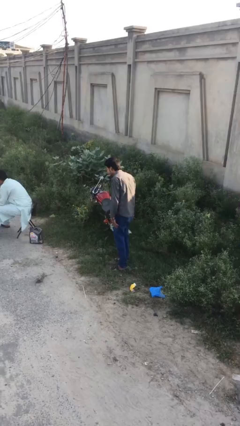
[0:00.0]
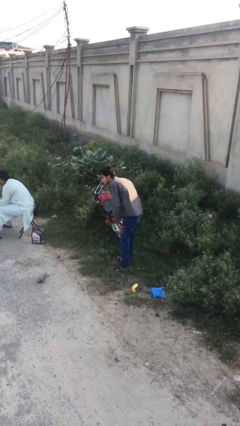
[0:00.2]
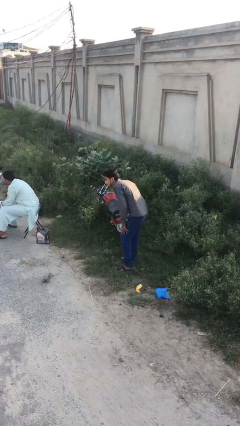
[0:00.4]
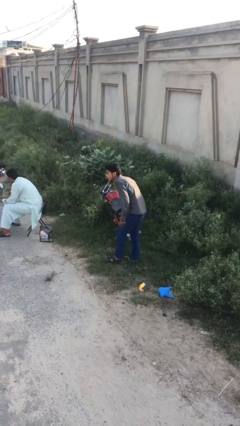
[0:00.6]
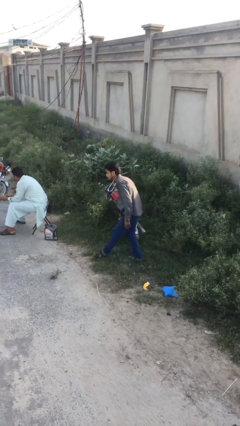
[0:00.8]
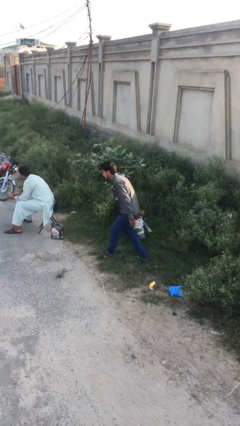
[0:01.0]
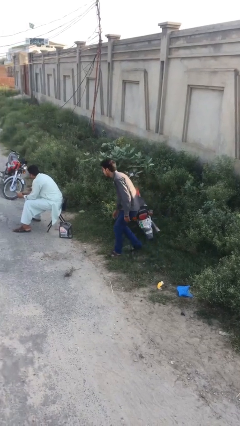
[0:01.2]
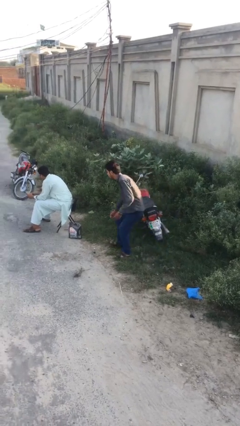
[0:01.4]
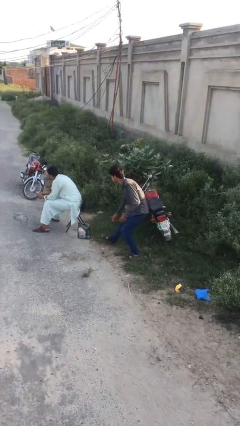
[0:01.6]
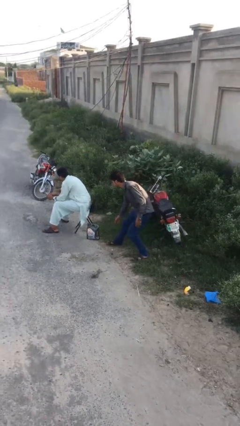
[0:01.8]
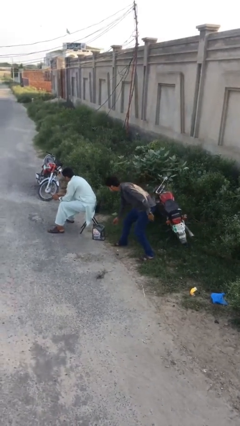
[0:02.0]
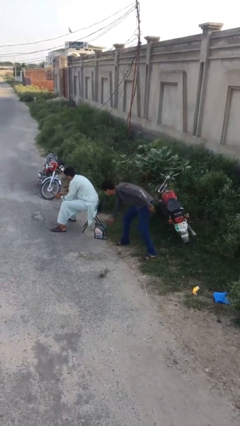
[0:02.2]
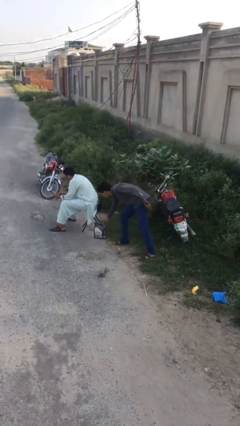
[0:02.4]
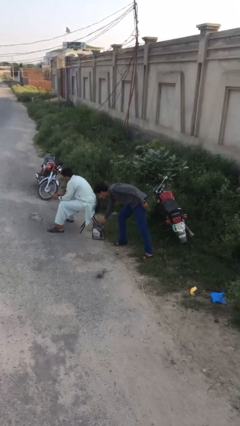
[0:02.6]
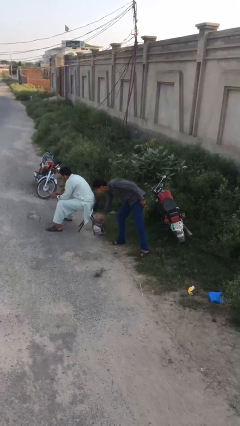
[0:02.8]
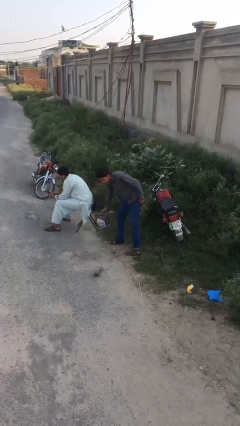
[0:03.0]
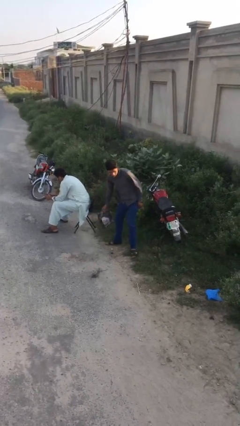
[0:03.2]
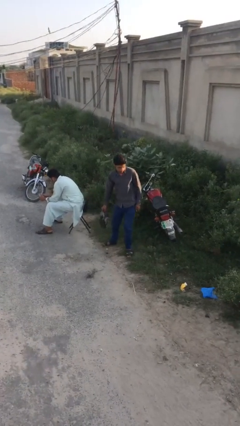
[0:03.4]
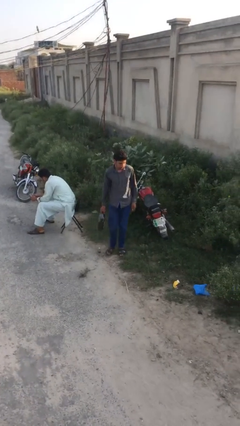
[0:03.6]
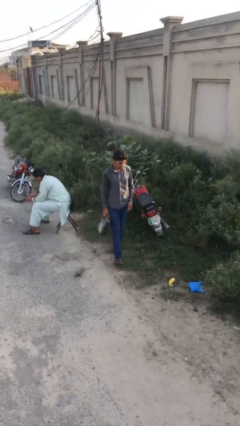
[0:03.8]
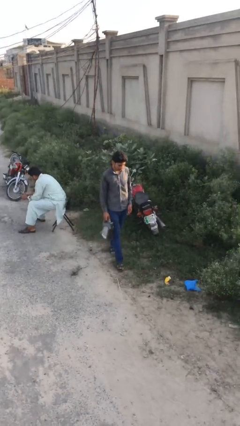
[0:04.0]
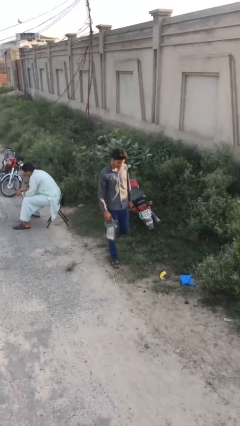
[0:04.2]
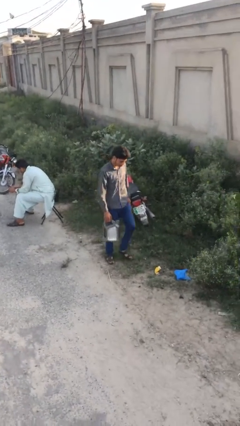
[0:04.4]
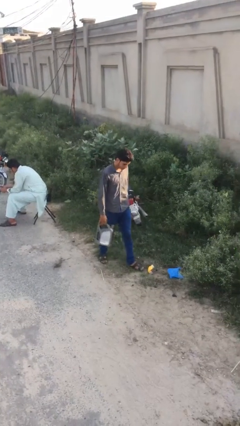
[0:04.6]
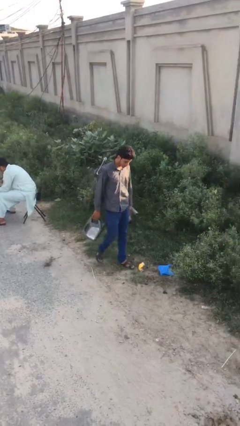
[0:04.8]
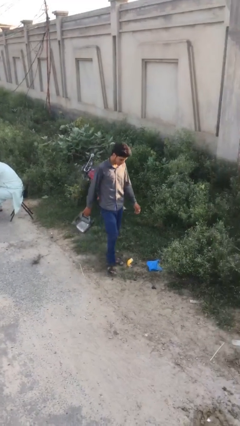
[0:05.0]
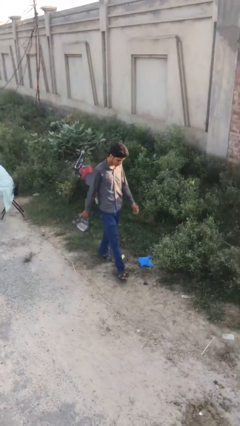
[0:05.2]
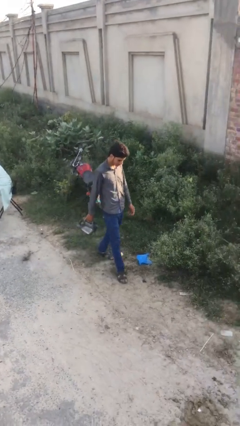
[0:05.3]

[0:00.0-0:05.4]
person steals object from person

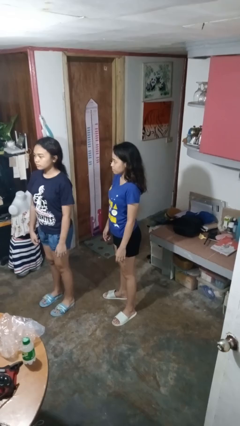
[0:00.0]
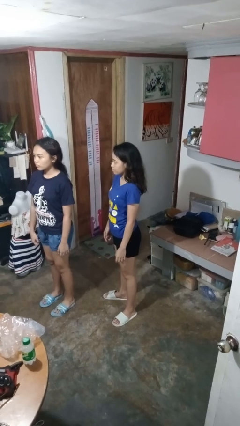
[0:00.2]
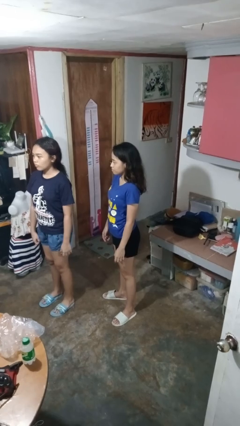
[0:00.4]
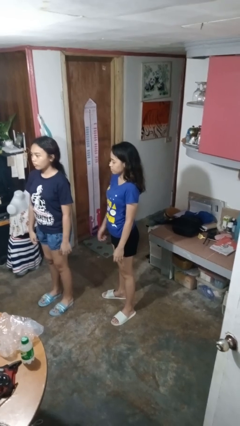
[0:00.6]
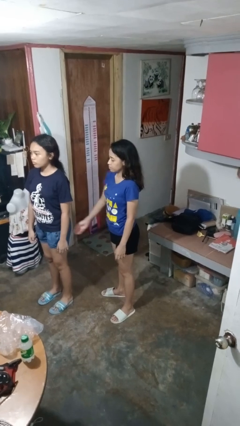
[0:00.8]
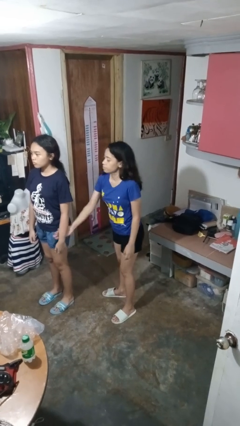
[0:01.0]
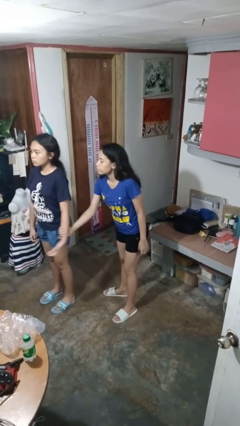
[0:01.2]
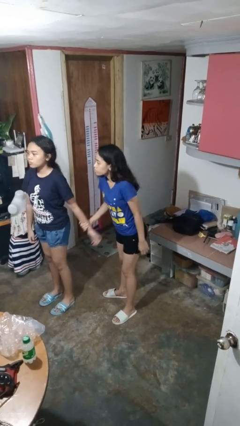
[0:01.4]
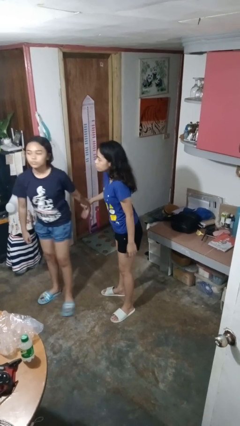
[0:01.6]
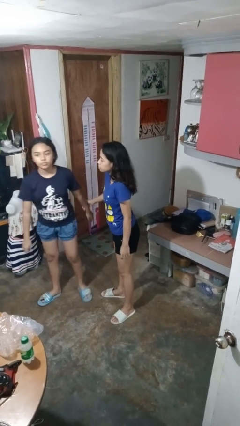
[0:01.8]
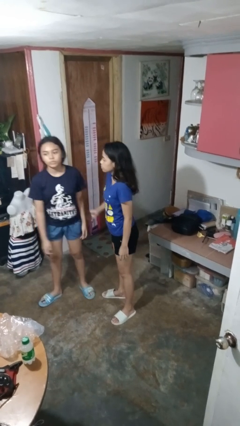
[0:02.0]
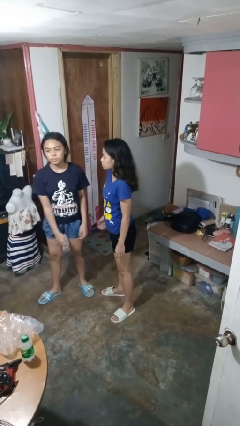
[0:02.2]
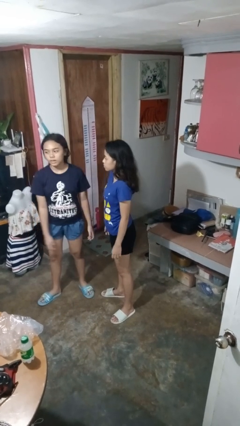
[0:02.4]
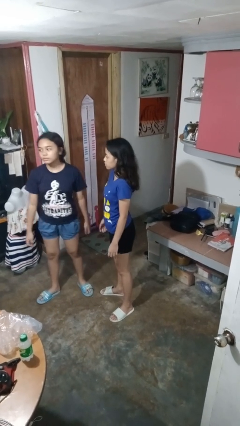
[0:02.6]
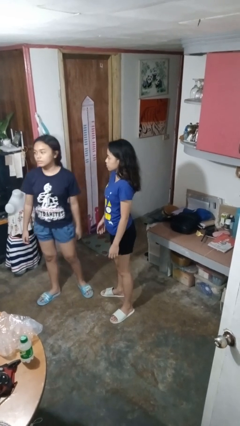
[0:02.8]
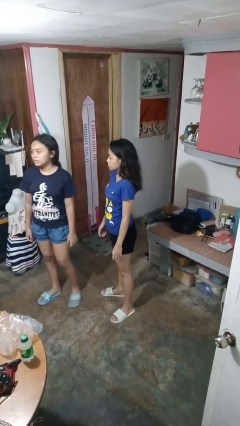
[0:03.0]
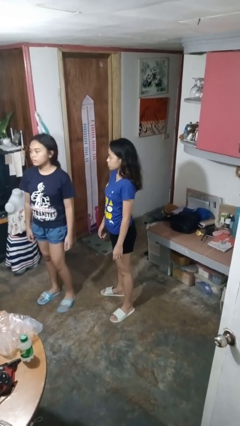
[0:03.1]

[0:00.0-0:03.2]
person grabs person by forearm

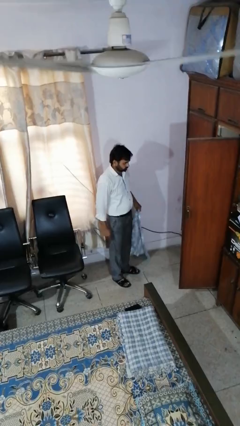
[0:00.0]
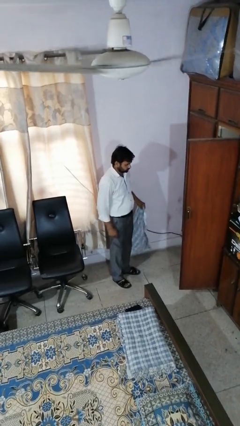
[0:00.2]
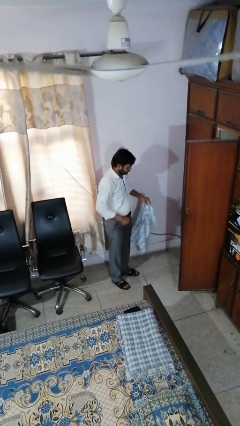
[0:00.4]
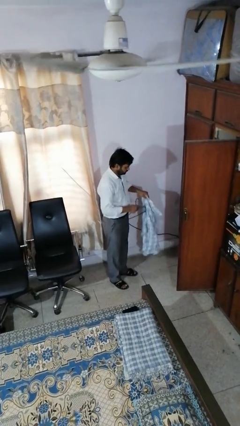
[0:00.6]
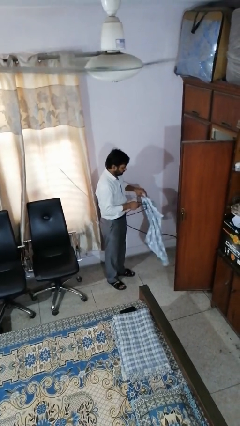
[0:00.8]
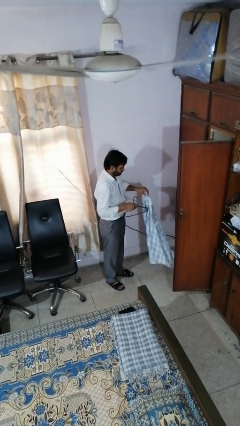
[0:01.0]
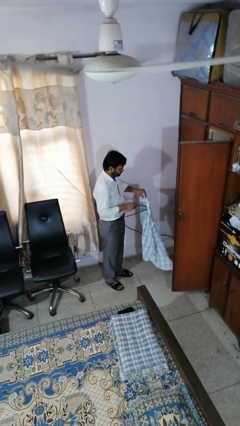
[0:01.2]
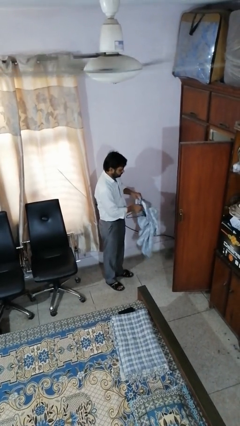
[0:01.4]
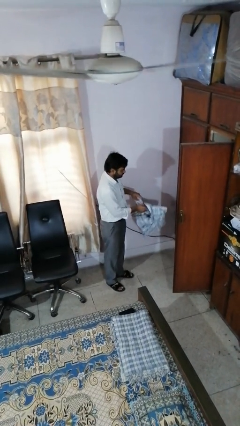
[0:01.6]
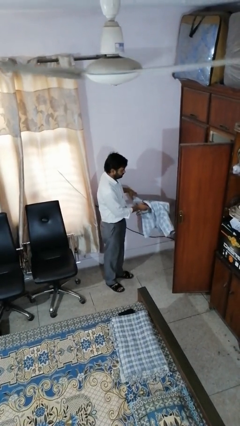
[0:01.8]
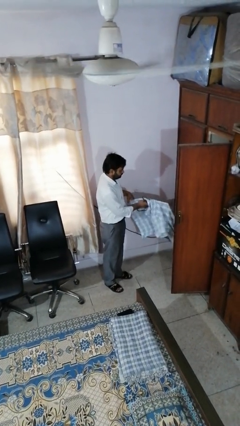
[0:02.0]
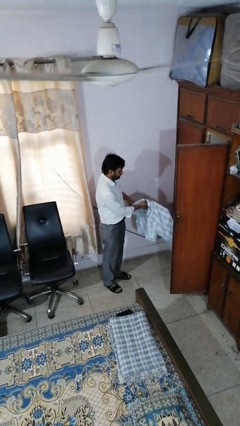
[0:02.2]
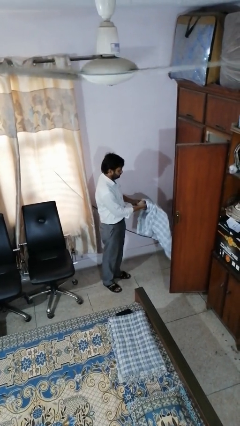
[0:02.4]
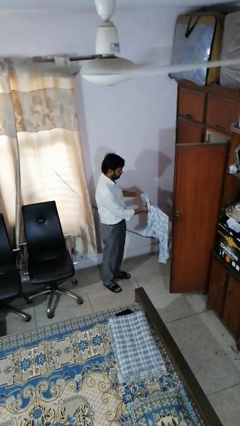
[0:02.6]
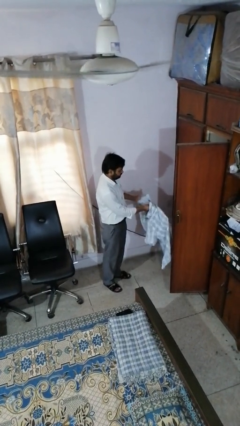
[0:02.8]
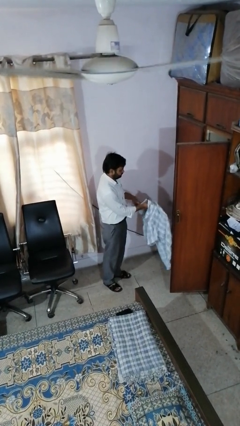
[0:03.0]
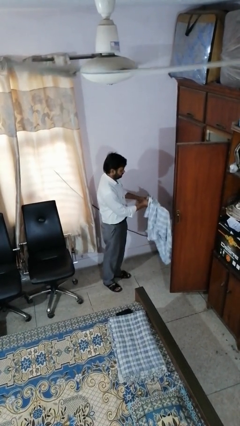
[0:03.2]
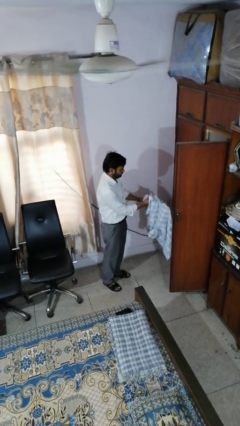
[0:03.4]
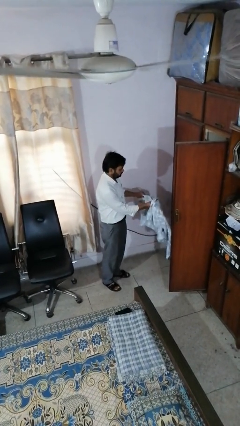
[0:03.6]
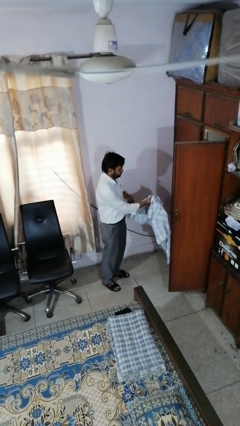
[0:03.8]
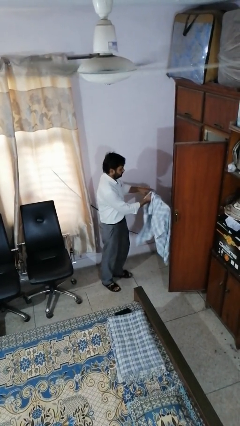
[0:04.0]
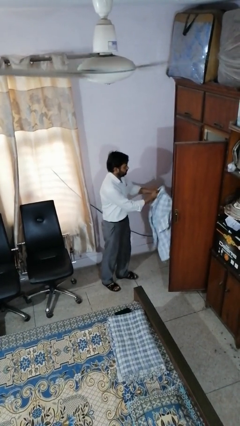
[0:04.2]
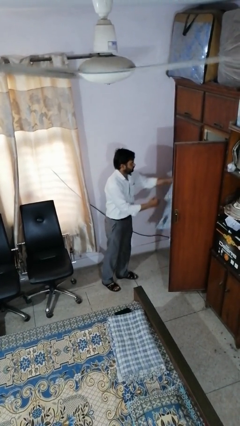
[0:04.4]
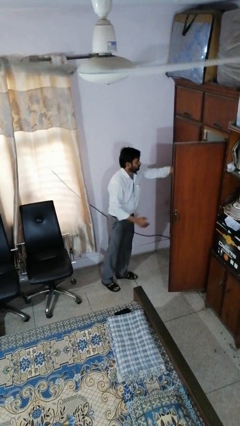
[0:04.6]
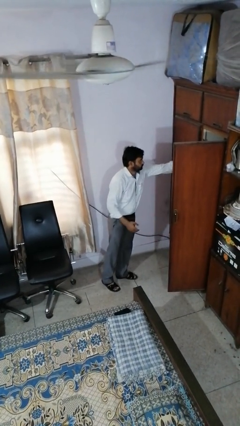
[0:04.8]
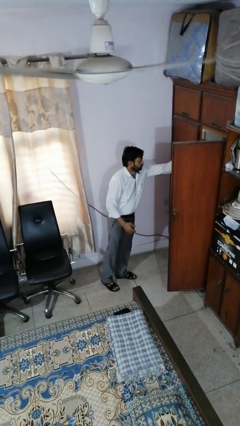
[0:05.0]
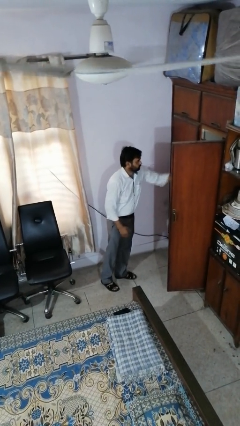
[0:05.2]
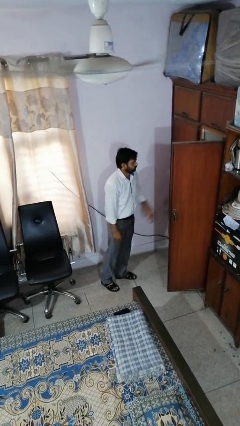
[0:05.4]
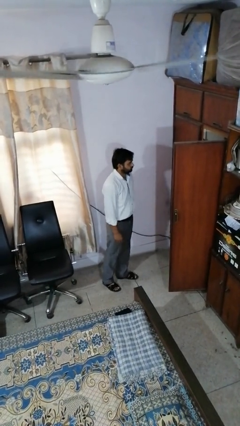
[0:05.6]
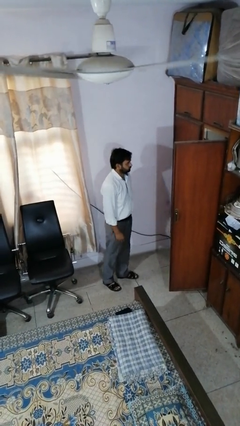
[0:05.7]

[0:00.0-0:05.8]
person puts clothes into closet

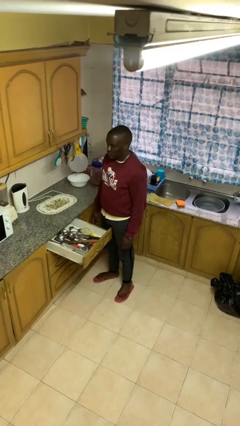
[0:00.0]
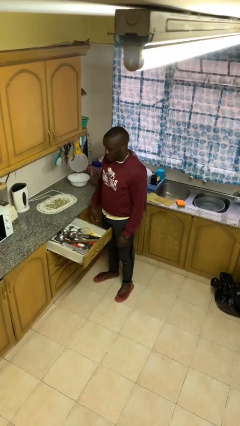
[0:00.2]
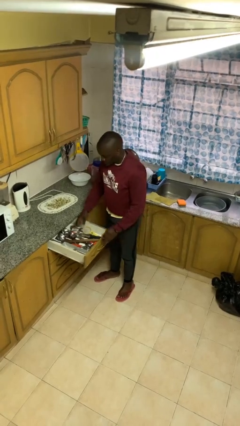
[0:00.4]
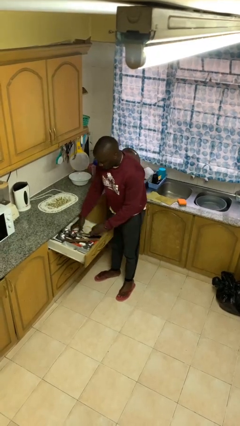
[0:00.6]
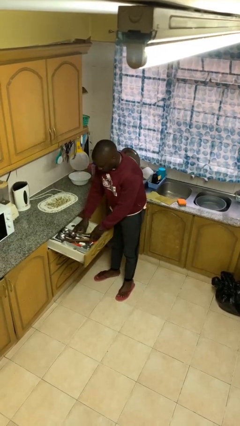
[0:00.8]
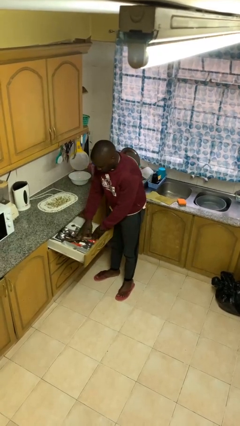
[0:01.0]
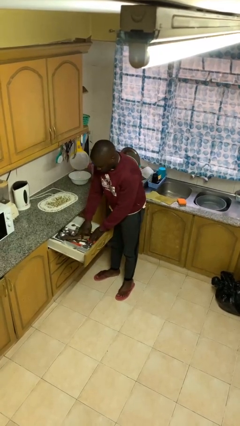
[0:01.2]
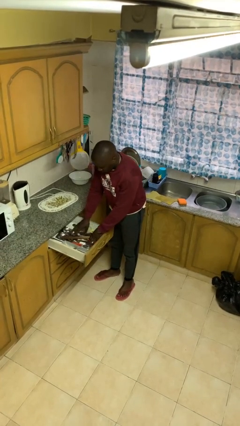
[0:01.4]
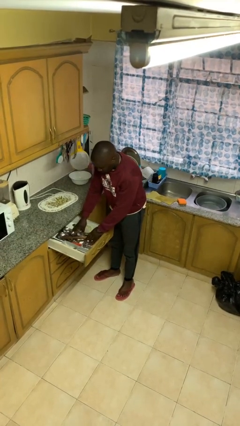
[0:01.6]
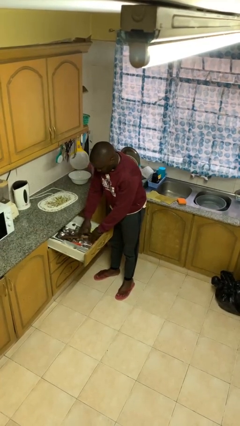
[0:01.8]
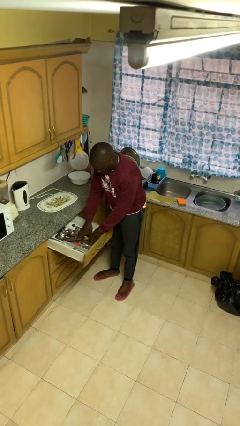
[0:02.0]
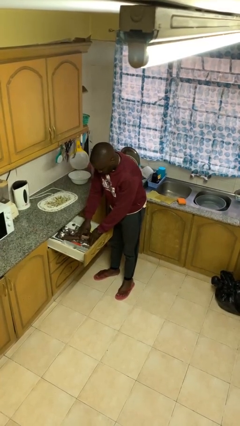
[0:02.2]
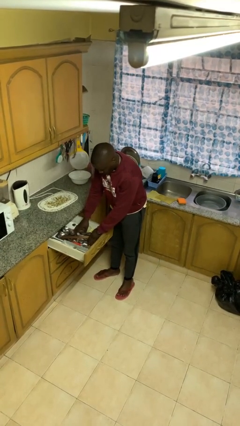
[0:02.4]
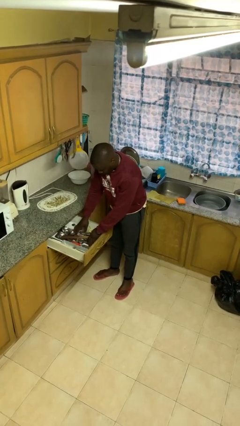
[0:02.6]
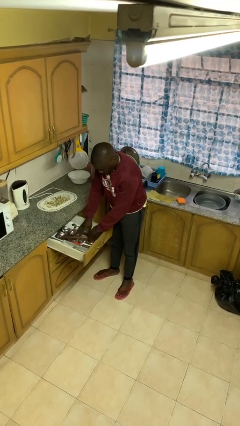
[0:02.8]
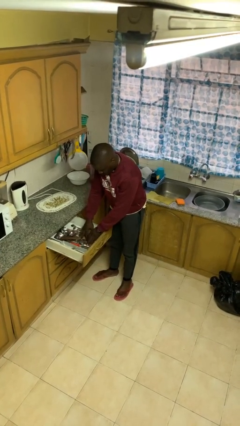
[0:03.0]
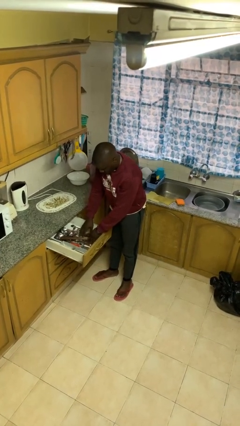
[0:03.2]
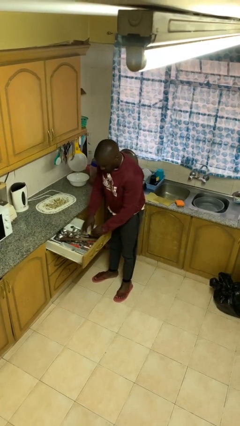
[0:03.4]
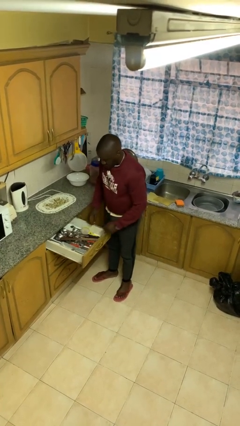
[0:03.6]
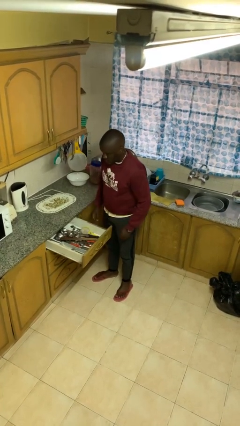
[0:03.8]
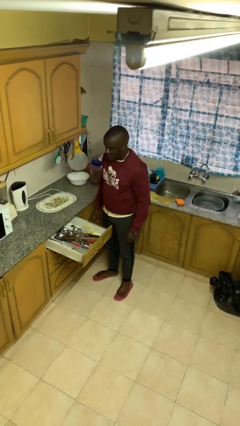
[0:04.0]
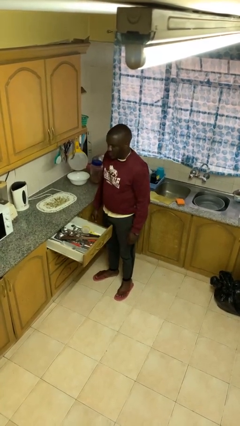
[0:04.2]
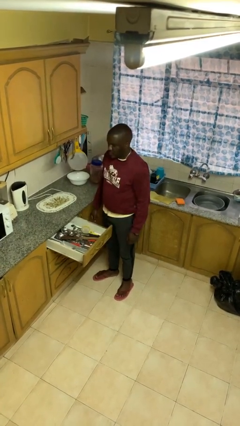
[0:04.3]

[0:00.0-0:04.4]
person searches in kitchen drawer
